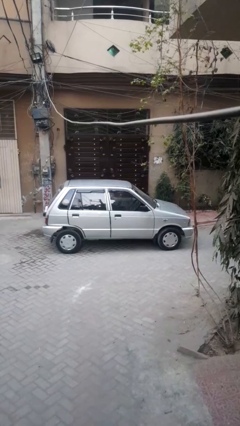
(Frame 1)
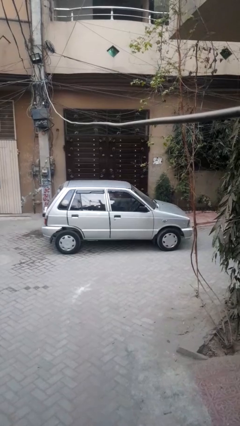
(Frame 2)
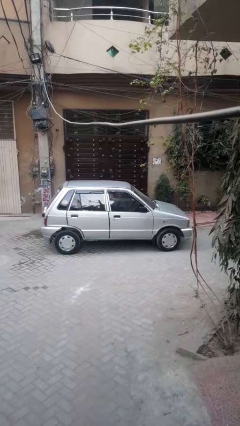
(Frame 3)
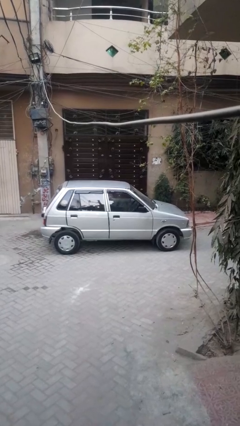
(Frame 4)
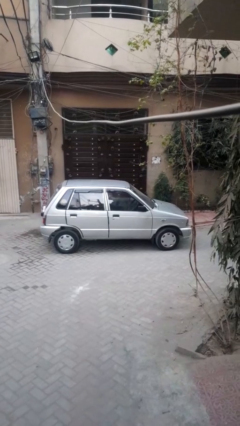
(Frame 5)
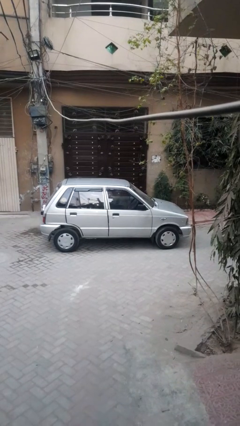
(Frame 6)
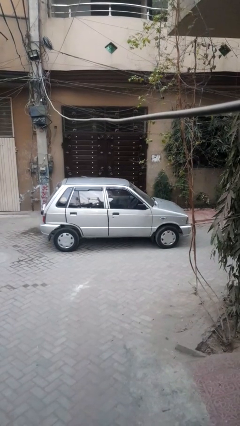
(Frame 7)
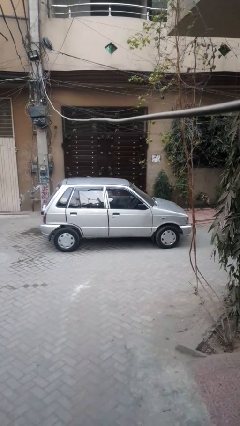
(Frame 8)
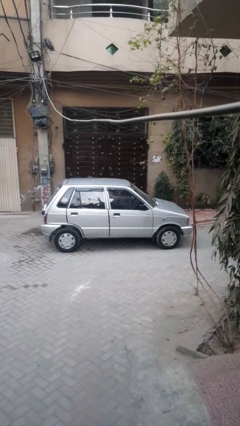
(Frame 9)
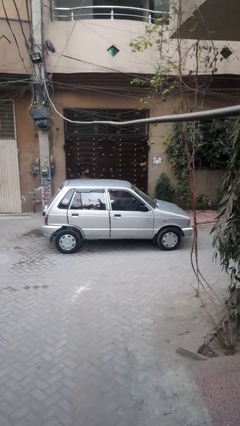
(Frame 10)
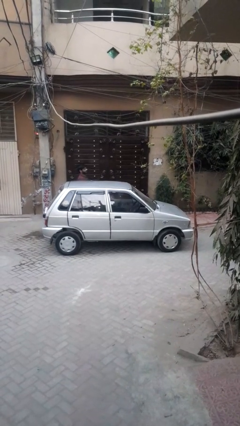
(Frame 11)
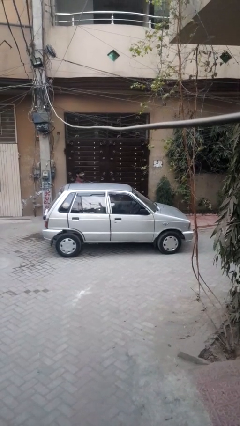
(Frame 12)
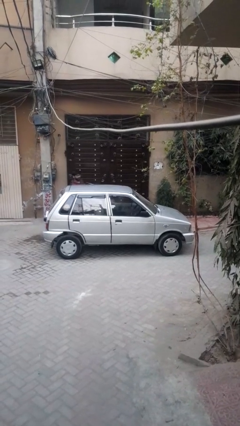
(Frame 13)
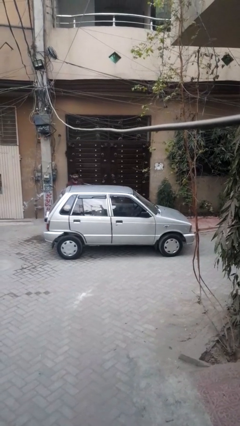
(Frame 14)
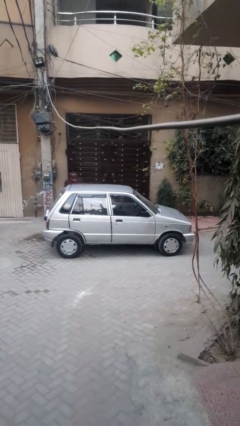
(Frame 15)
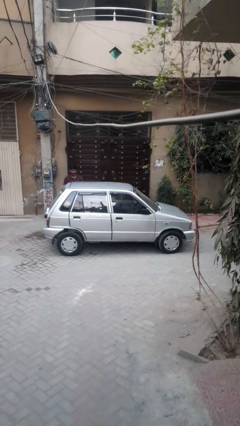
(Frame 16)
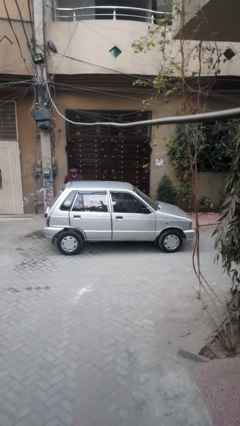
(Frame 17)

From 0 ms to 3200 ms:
car drops off person

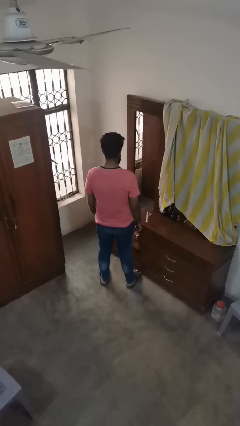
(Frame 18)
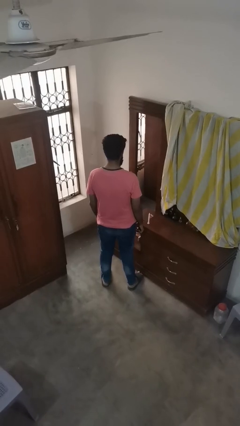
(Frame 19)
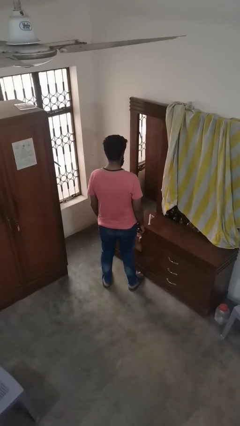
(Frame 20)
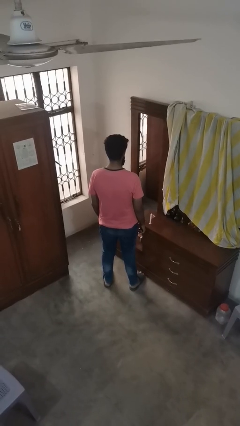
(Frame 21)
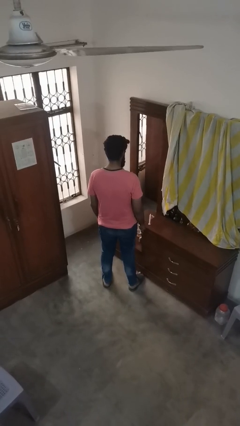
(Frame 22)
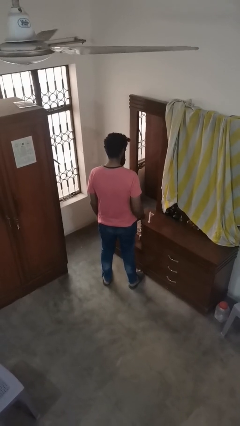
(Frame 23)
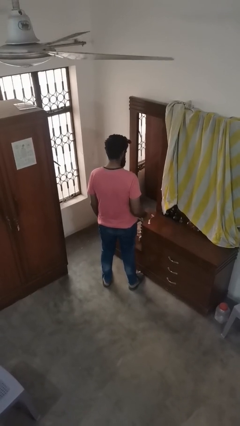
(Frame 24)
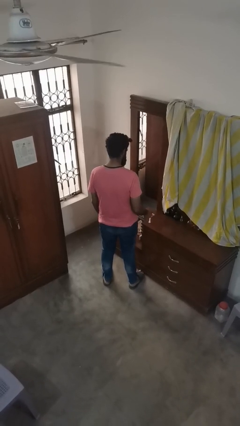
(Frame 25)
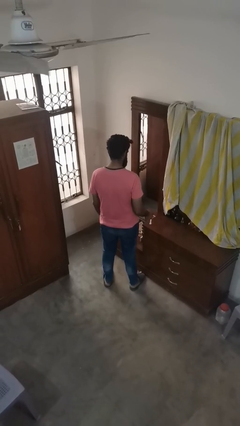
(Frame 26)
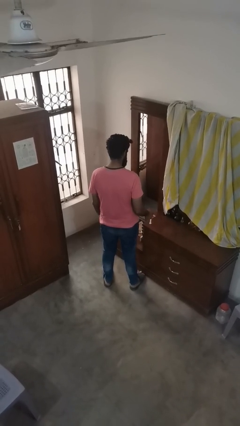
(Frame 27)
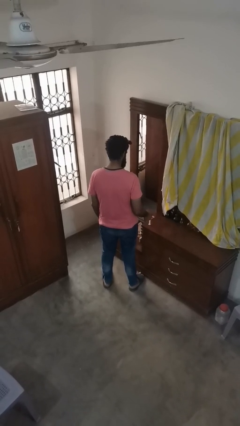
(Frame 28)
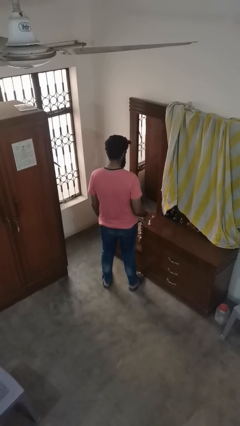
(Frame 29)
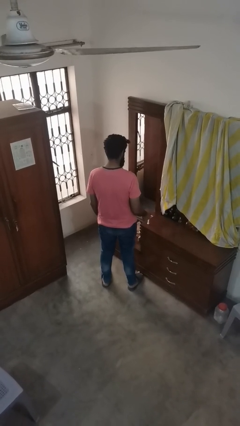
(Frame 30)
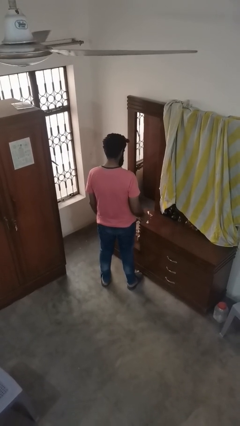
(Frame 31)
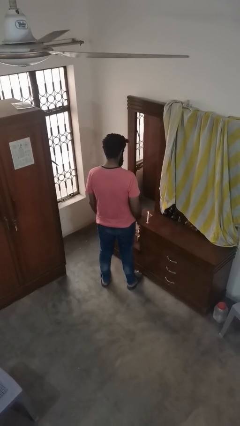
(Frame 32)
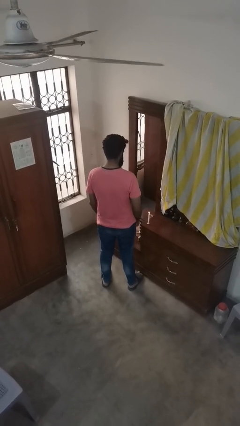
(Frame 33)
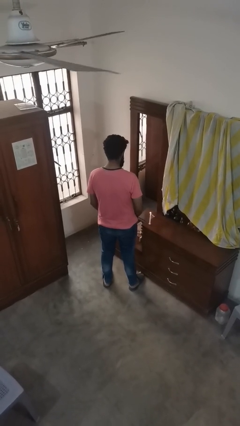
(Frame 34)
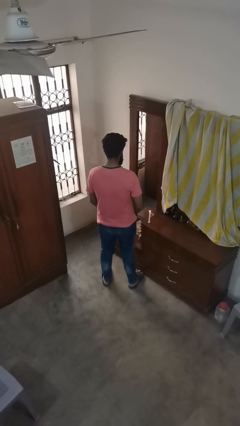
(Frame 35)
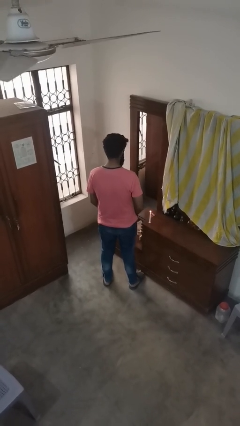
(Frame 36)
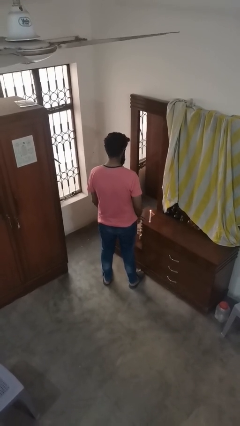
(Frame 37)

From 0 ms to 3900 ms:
person lights candle

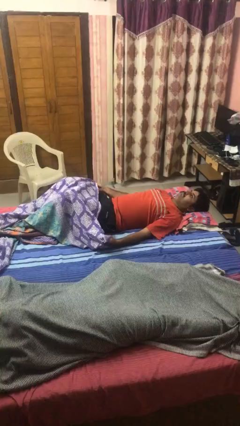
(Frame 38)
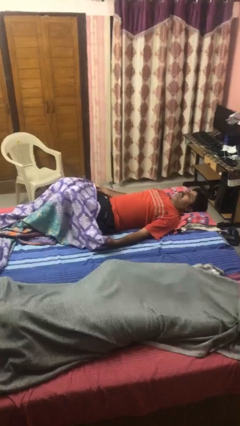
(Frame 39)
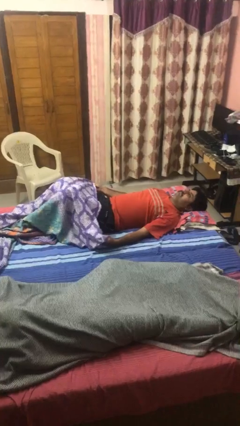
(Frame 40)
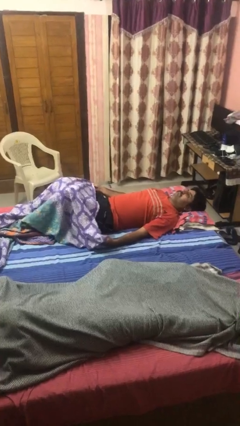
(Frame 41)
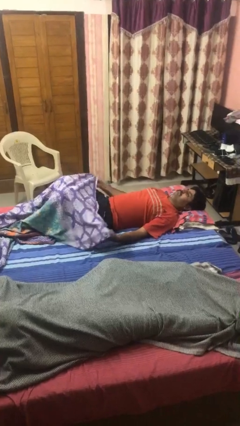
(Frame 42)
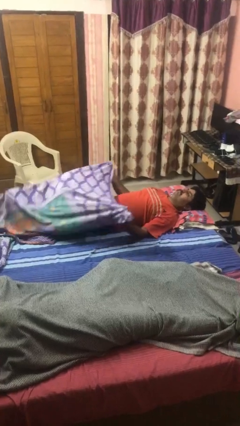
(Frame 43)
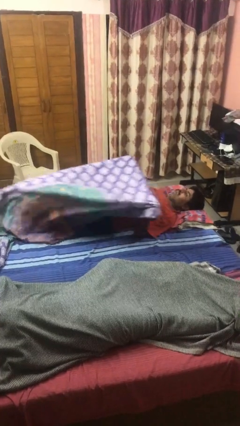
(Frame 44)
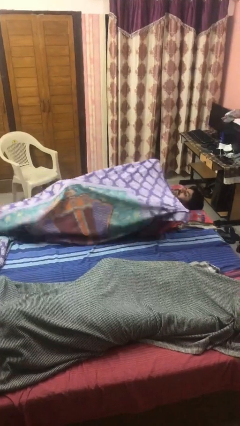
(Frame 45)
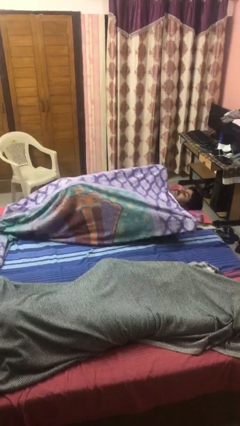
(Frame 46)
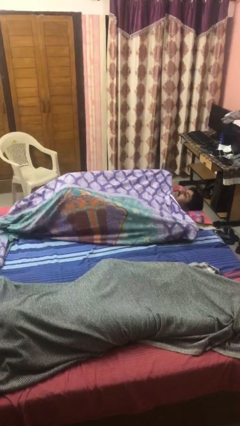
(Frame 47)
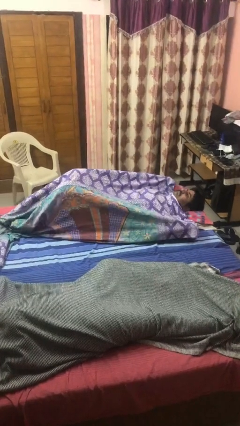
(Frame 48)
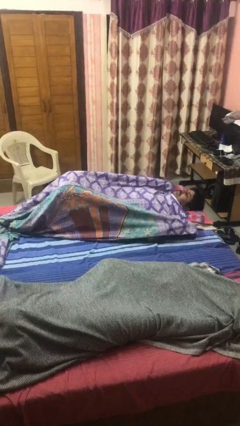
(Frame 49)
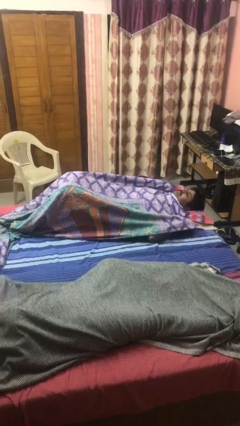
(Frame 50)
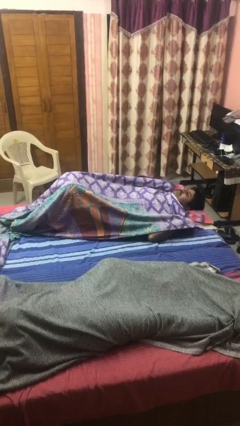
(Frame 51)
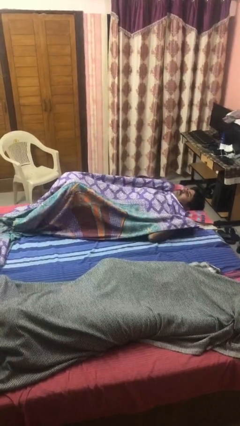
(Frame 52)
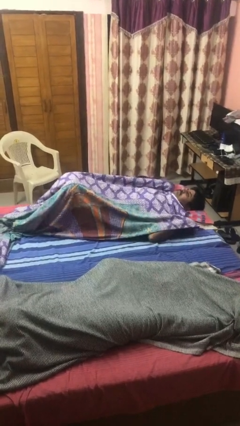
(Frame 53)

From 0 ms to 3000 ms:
person covers with bedsheets

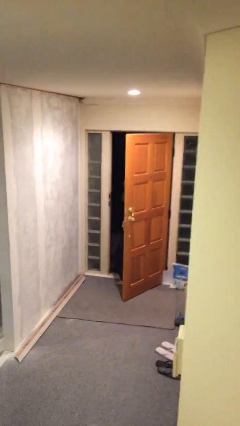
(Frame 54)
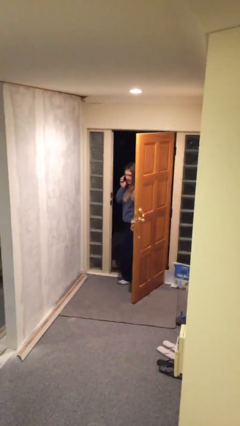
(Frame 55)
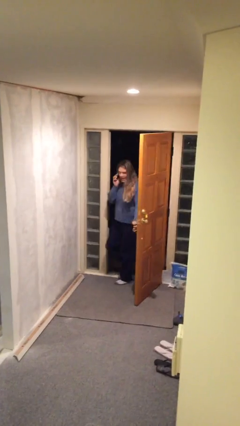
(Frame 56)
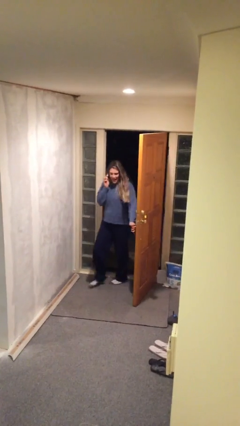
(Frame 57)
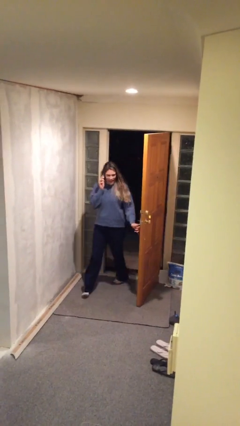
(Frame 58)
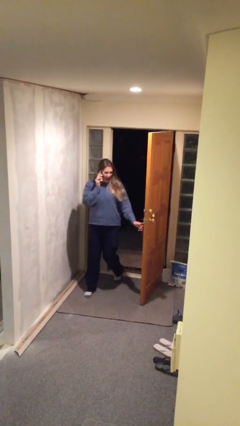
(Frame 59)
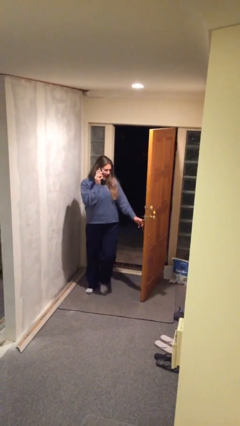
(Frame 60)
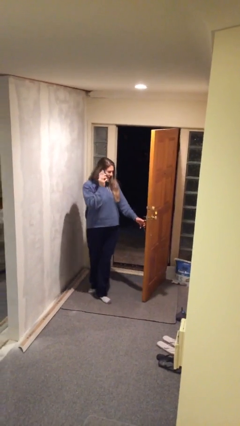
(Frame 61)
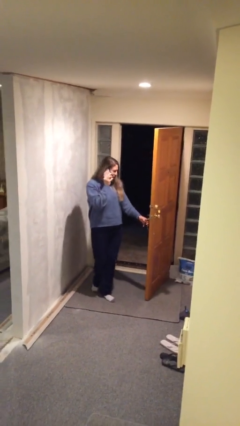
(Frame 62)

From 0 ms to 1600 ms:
person enters scene through structure

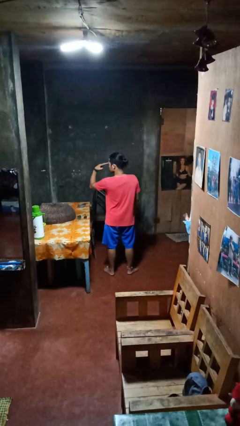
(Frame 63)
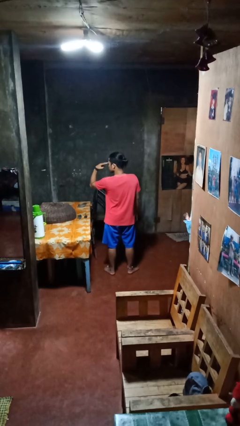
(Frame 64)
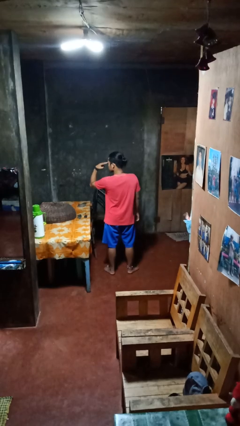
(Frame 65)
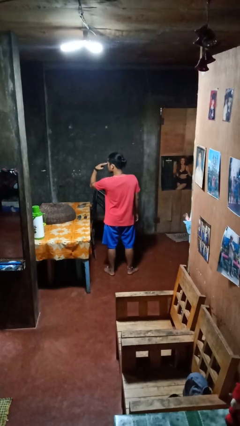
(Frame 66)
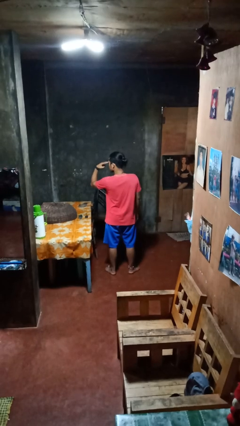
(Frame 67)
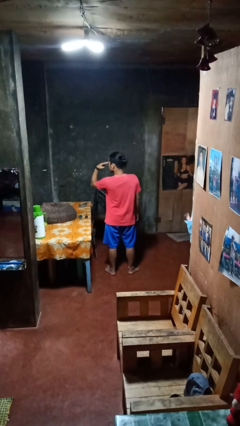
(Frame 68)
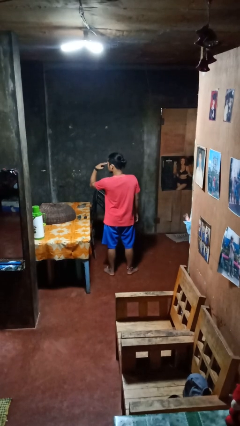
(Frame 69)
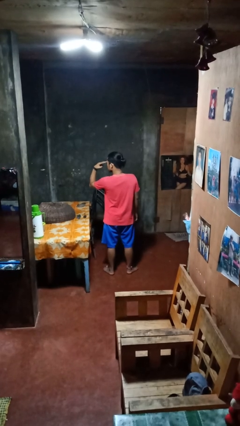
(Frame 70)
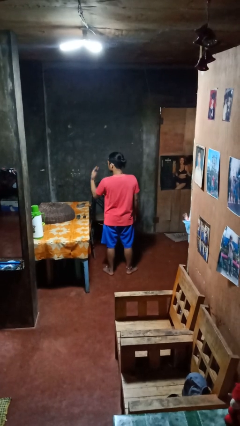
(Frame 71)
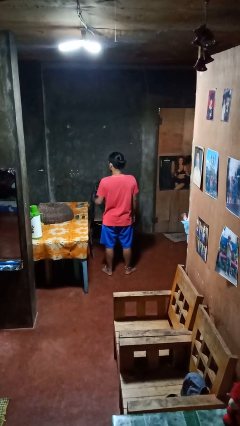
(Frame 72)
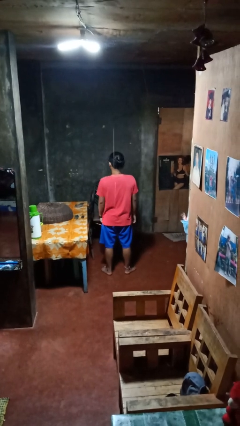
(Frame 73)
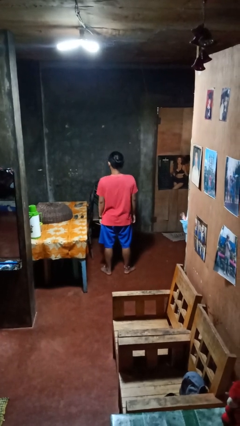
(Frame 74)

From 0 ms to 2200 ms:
person gestures watch closely

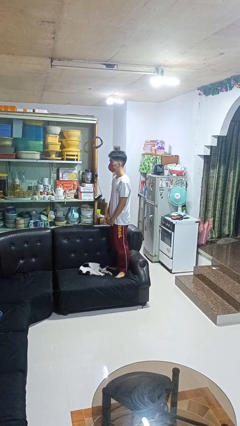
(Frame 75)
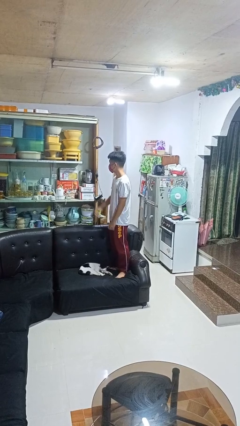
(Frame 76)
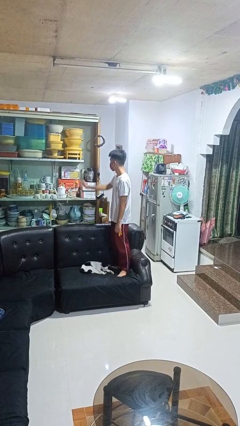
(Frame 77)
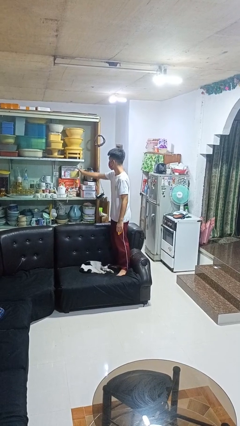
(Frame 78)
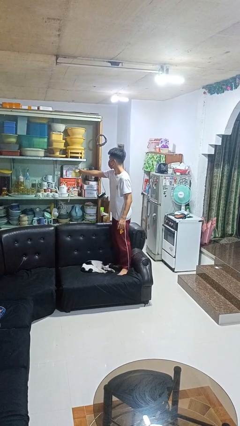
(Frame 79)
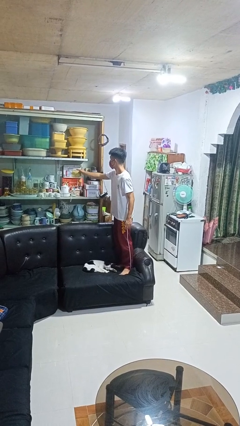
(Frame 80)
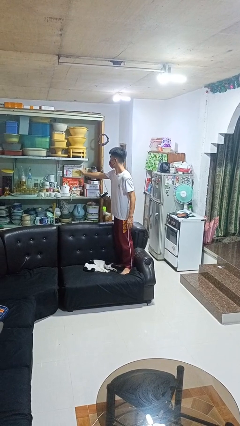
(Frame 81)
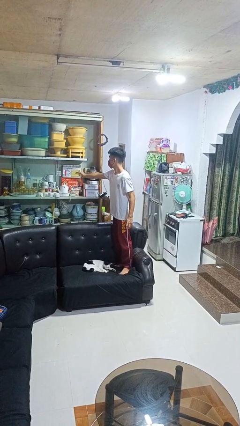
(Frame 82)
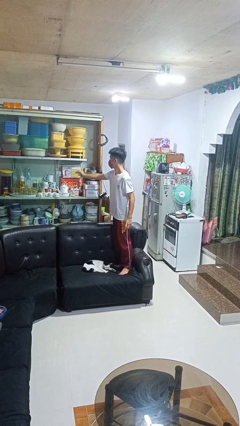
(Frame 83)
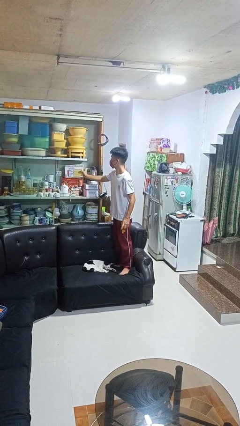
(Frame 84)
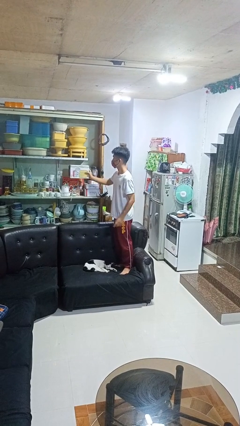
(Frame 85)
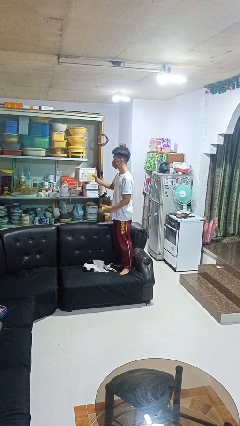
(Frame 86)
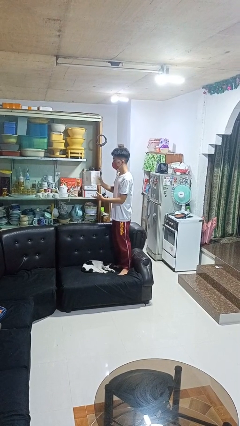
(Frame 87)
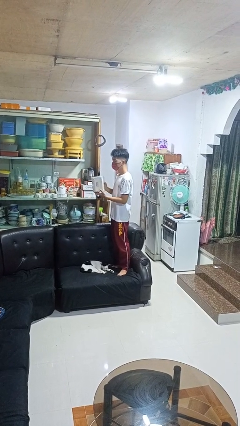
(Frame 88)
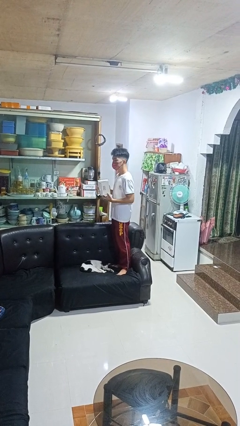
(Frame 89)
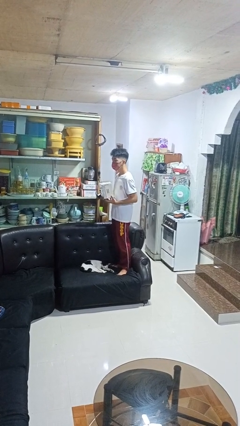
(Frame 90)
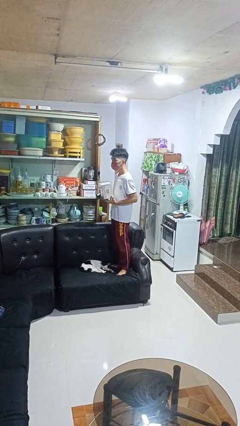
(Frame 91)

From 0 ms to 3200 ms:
person picks up object from cabinet
